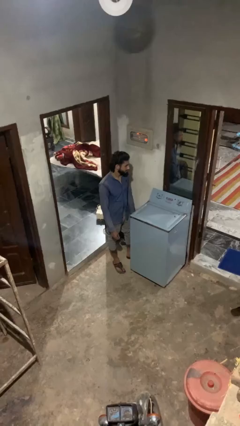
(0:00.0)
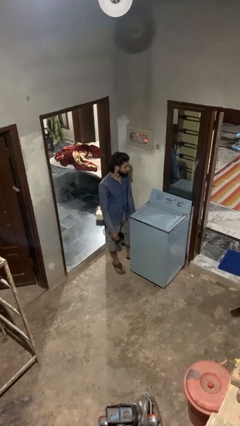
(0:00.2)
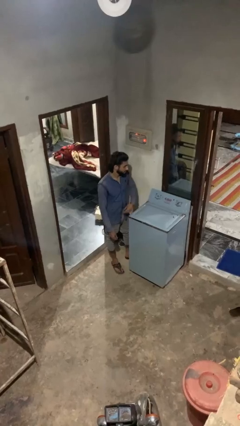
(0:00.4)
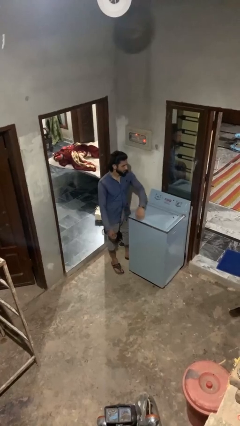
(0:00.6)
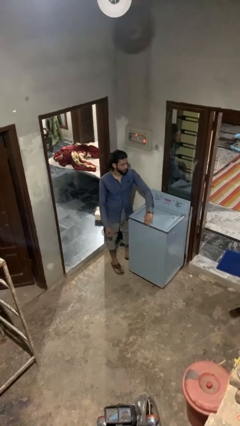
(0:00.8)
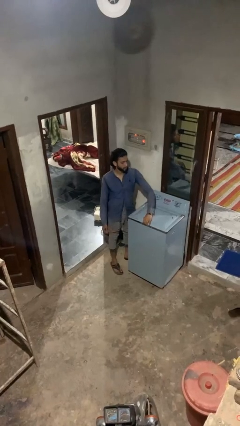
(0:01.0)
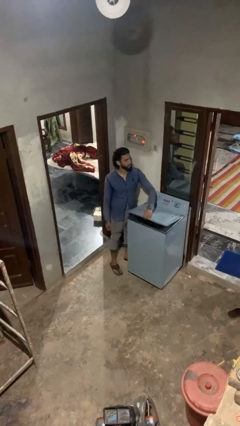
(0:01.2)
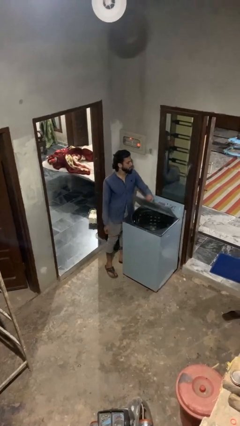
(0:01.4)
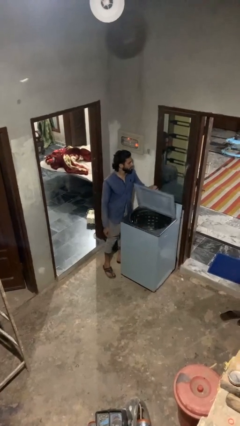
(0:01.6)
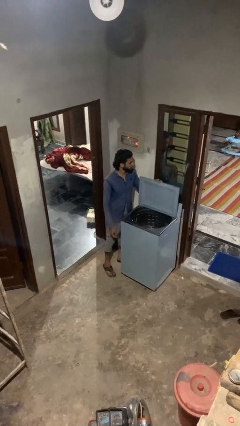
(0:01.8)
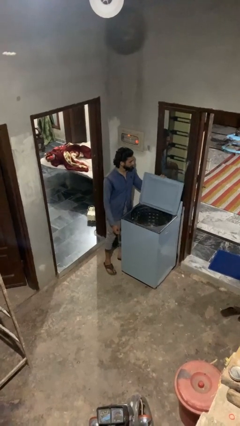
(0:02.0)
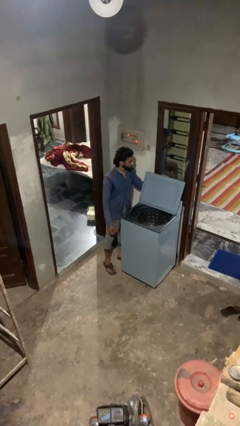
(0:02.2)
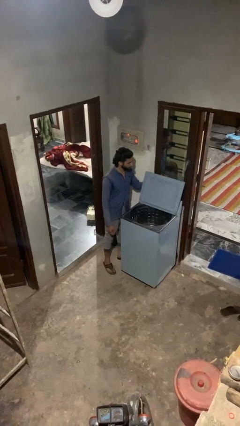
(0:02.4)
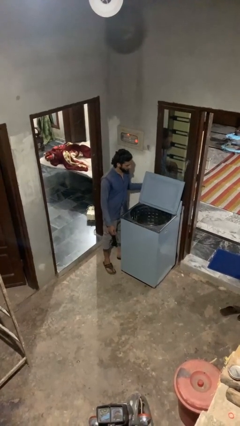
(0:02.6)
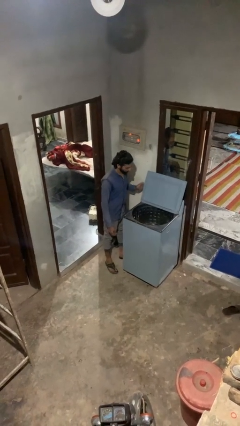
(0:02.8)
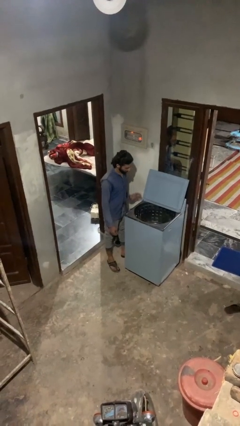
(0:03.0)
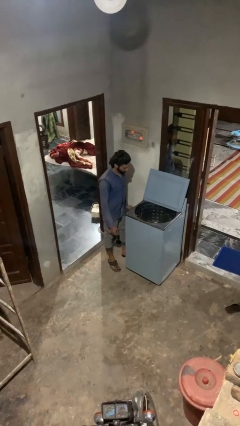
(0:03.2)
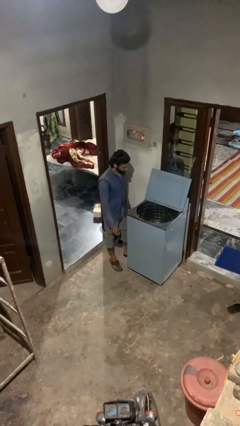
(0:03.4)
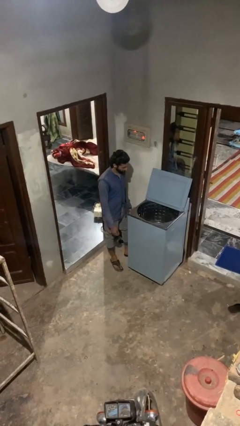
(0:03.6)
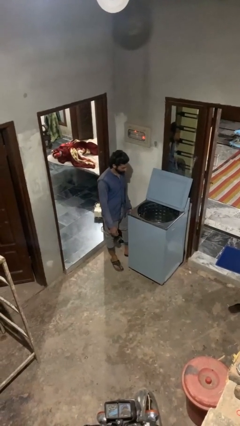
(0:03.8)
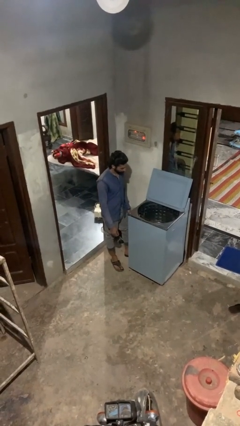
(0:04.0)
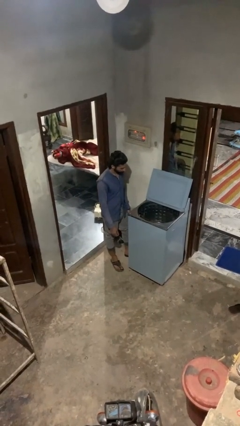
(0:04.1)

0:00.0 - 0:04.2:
person opens clothes washer

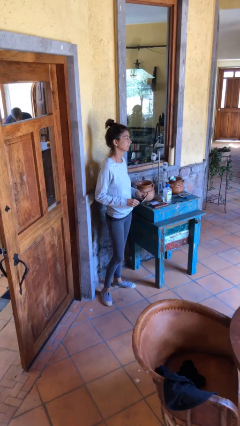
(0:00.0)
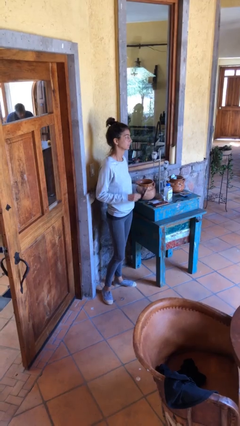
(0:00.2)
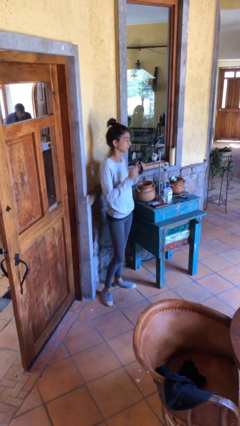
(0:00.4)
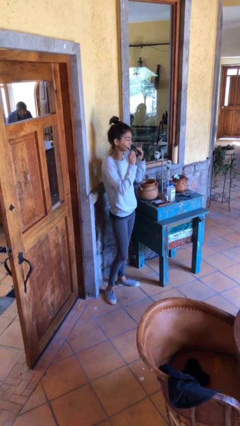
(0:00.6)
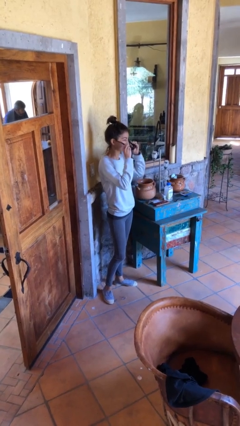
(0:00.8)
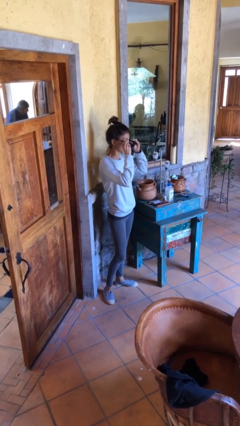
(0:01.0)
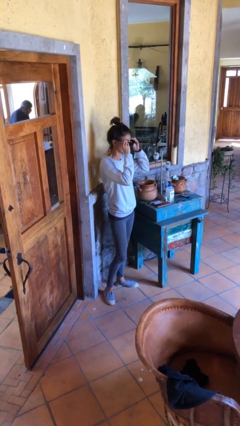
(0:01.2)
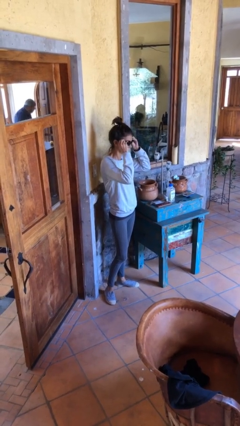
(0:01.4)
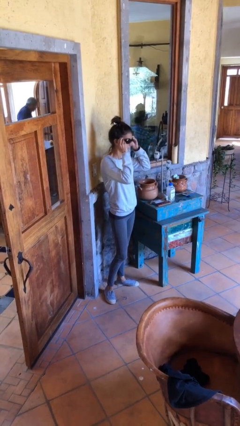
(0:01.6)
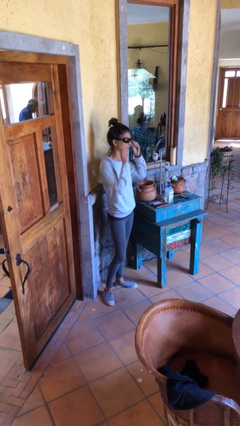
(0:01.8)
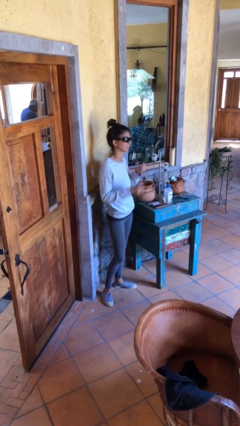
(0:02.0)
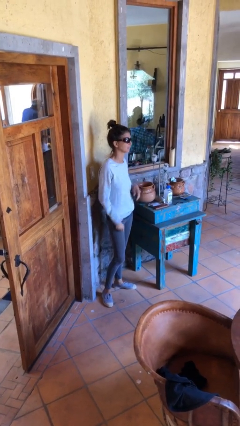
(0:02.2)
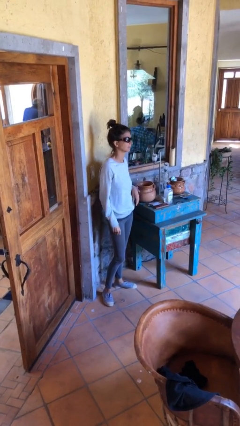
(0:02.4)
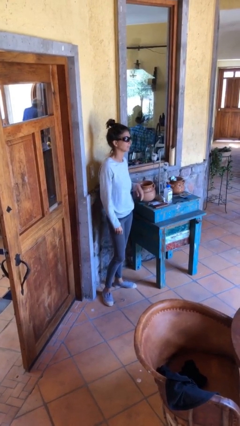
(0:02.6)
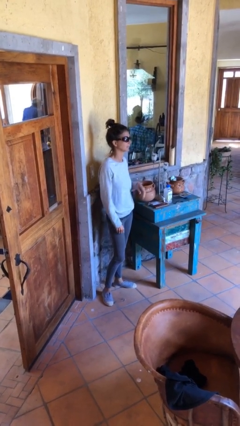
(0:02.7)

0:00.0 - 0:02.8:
person puts on sunglasses

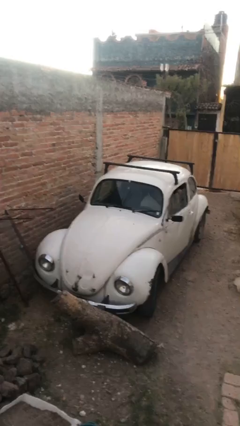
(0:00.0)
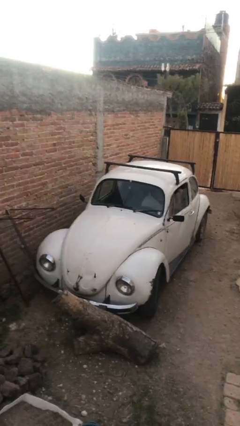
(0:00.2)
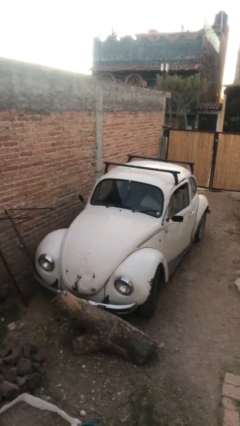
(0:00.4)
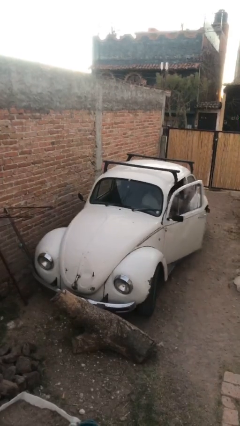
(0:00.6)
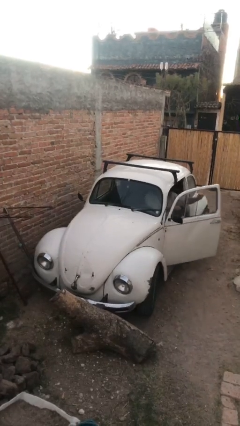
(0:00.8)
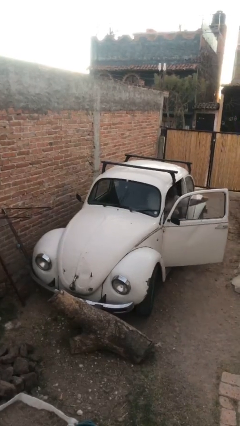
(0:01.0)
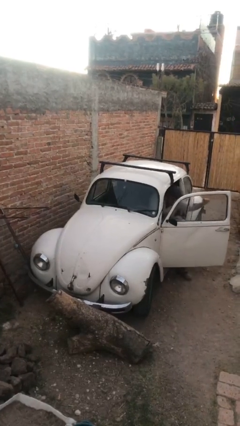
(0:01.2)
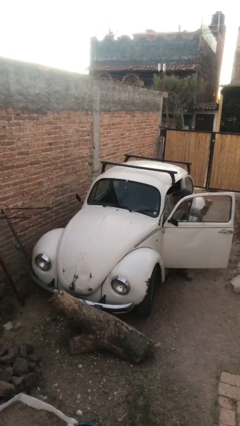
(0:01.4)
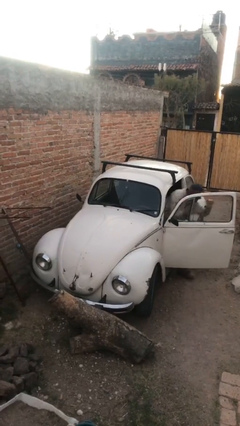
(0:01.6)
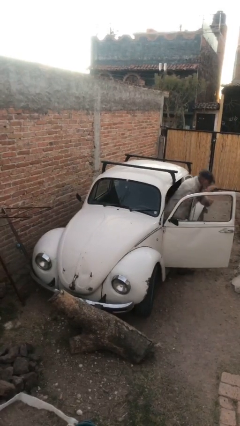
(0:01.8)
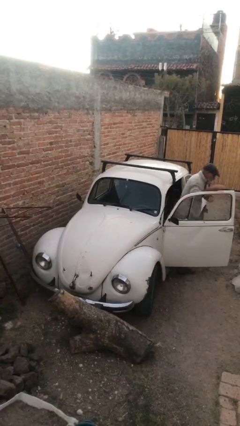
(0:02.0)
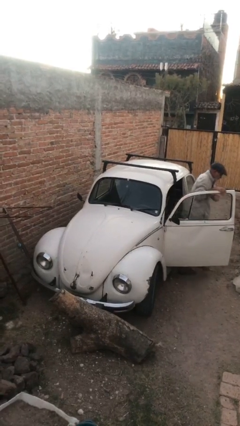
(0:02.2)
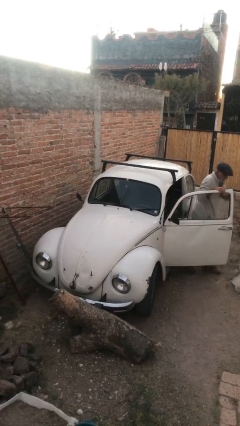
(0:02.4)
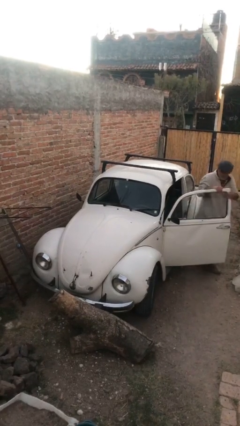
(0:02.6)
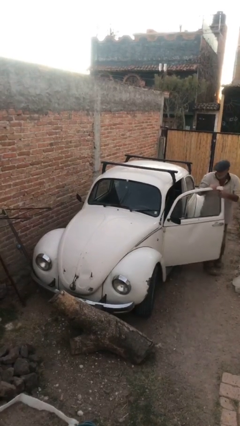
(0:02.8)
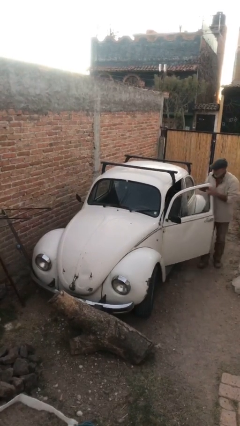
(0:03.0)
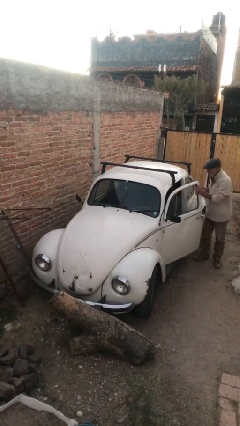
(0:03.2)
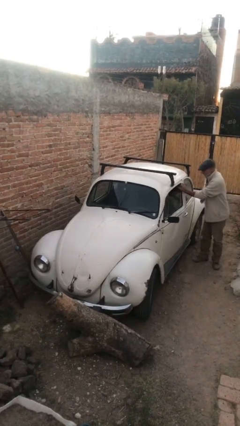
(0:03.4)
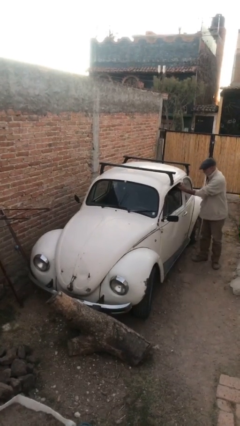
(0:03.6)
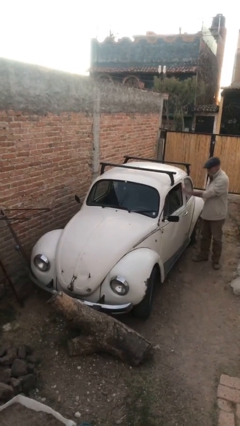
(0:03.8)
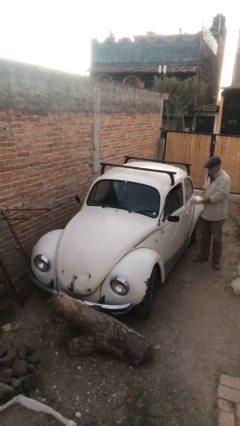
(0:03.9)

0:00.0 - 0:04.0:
car drops off person

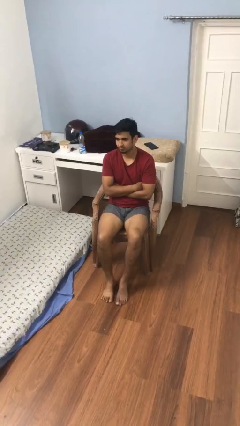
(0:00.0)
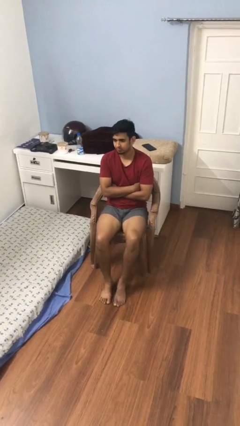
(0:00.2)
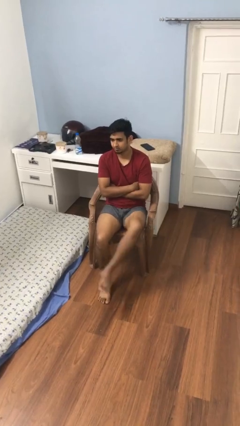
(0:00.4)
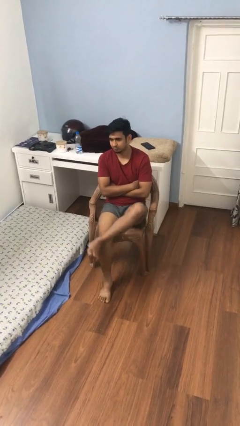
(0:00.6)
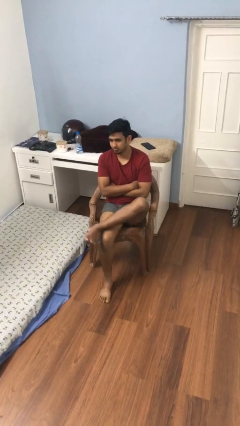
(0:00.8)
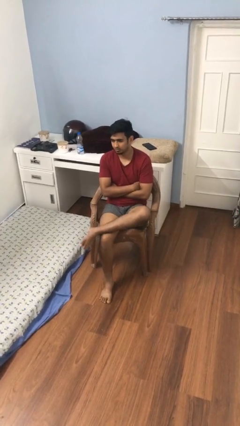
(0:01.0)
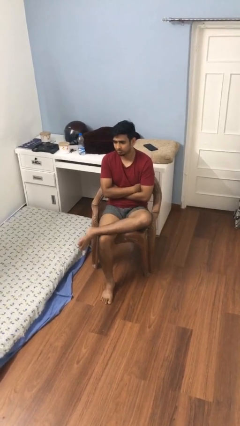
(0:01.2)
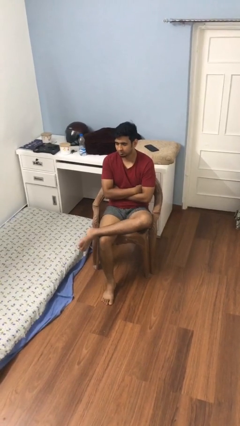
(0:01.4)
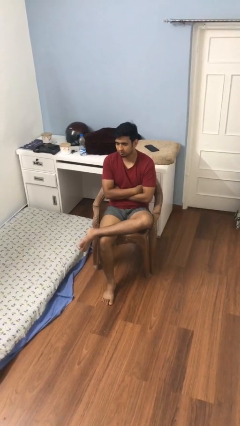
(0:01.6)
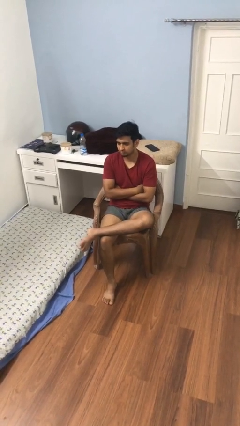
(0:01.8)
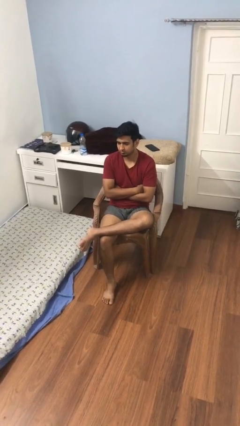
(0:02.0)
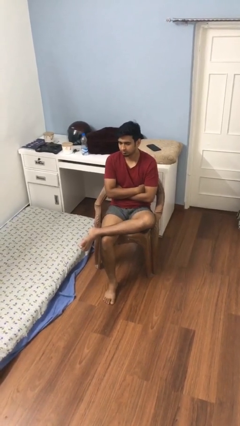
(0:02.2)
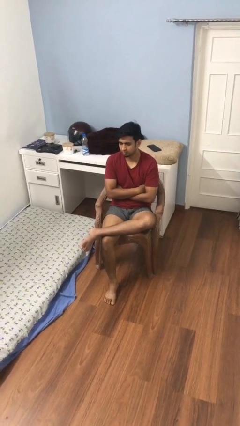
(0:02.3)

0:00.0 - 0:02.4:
person crosses legs

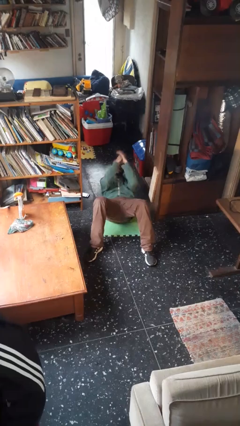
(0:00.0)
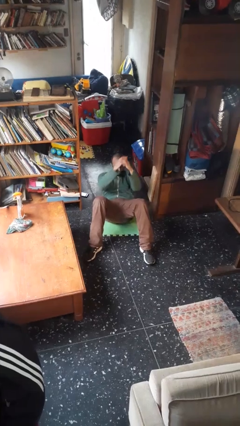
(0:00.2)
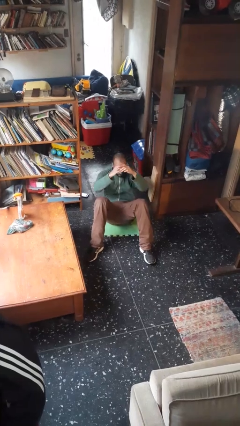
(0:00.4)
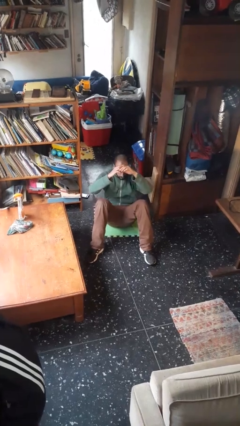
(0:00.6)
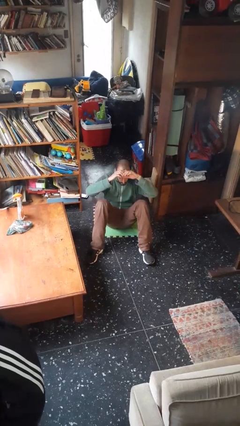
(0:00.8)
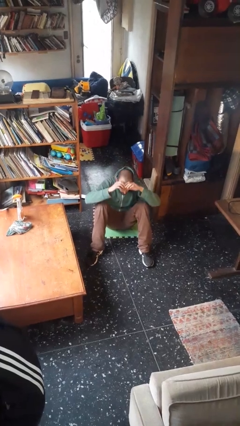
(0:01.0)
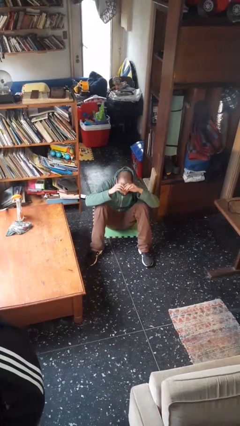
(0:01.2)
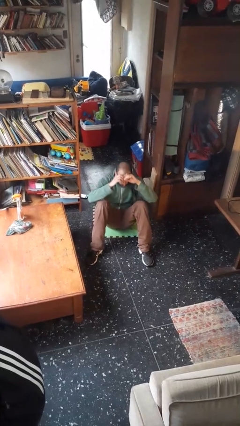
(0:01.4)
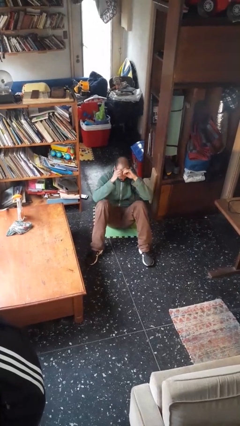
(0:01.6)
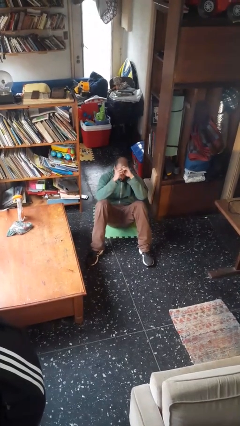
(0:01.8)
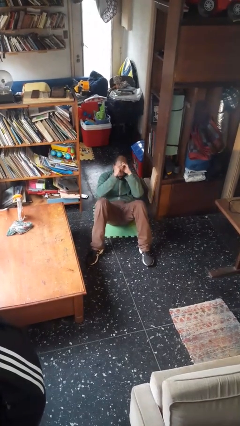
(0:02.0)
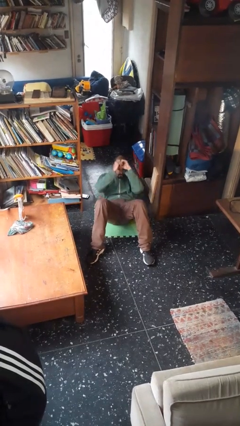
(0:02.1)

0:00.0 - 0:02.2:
person exercises with situp

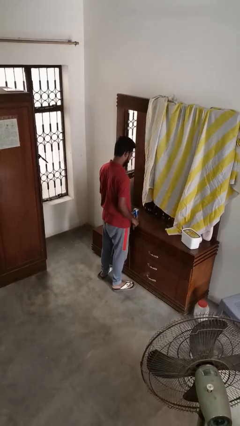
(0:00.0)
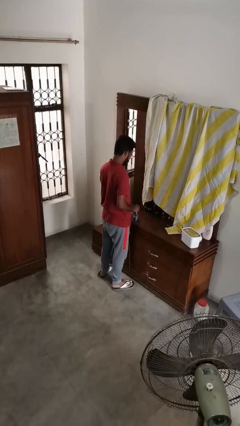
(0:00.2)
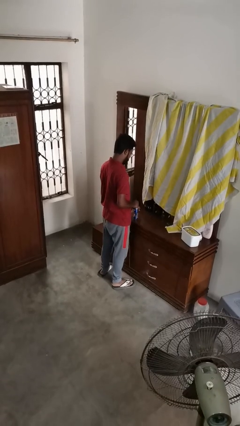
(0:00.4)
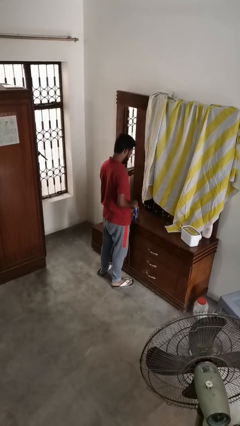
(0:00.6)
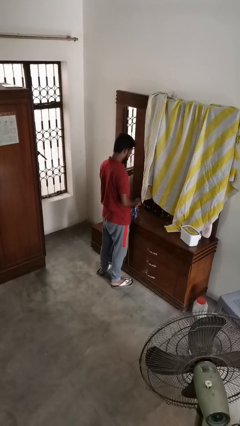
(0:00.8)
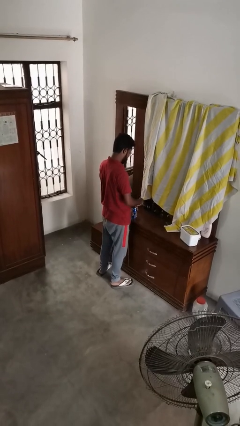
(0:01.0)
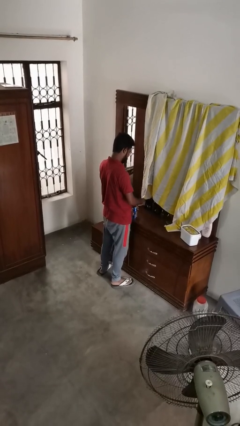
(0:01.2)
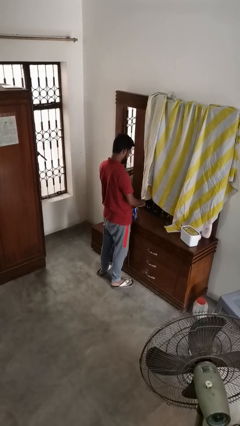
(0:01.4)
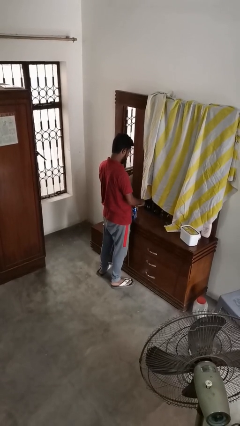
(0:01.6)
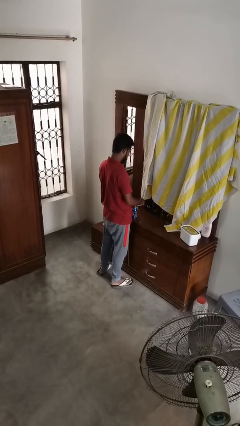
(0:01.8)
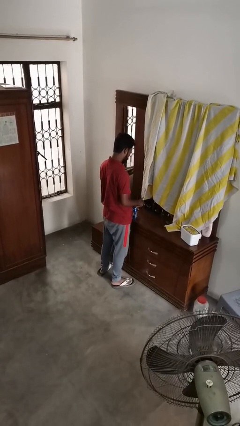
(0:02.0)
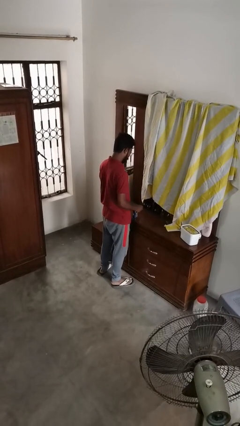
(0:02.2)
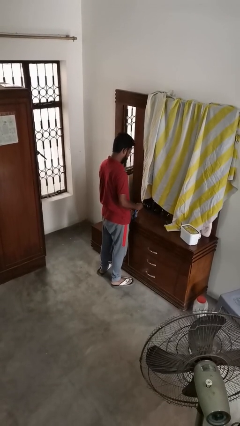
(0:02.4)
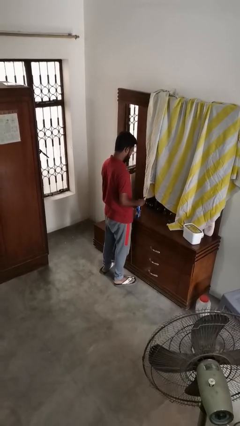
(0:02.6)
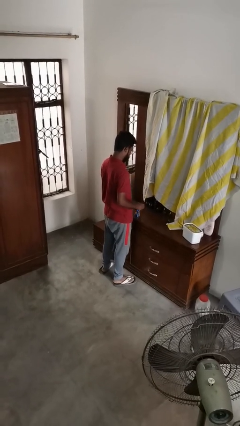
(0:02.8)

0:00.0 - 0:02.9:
person opens can with can opener
